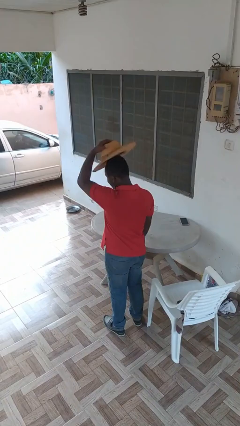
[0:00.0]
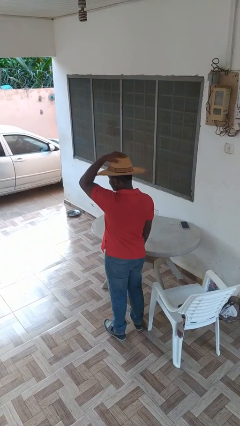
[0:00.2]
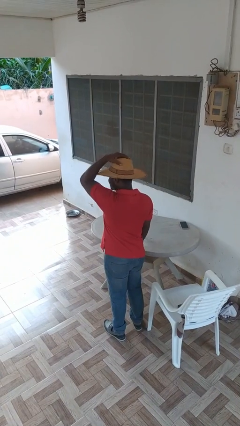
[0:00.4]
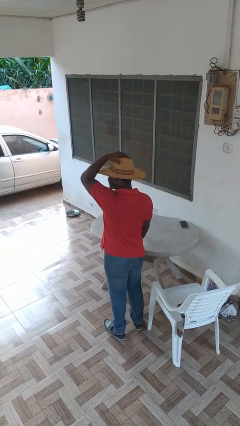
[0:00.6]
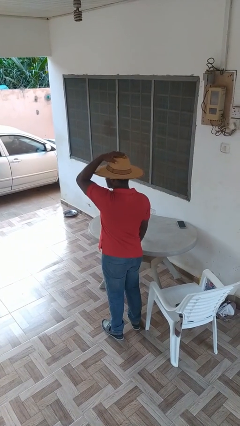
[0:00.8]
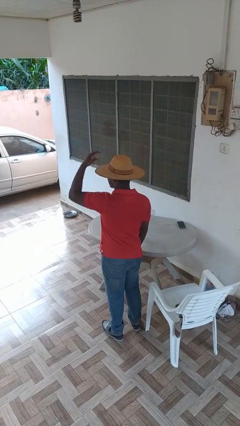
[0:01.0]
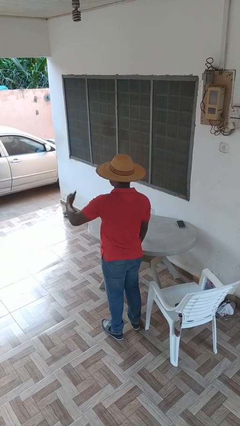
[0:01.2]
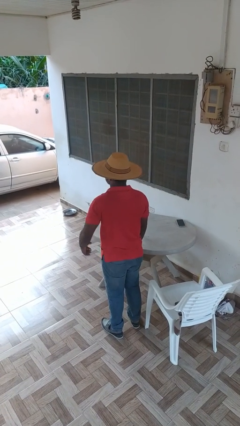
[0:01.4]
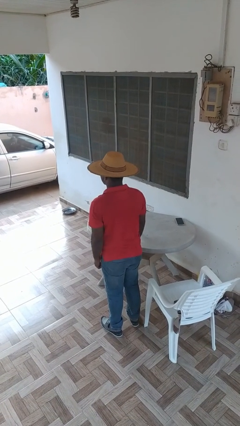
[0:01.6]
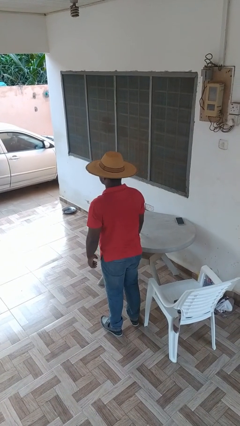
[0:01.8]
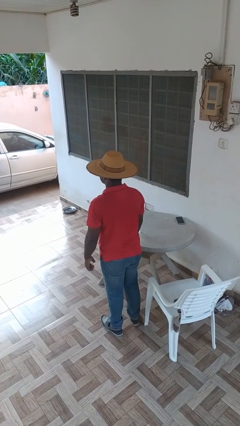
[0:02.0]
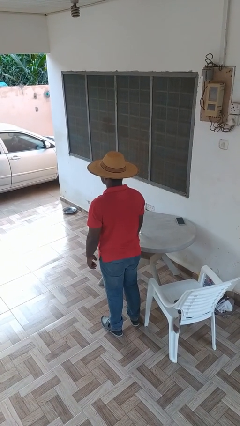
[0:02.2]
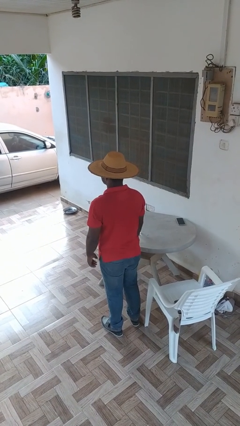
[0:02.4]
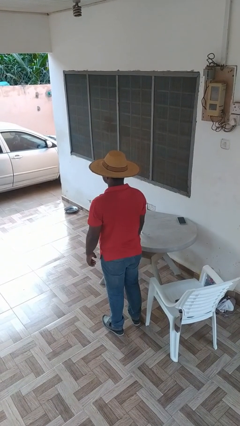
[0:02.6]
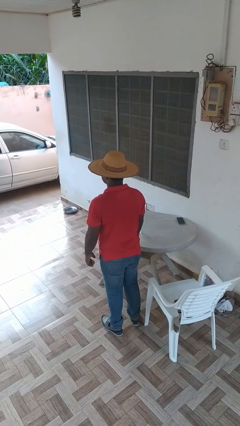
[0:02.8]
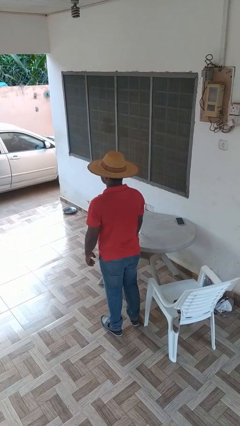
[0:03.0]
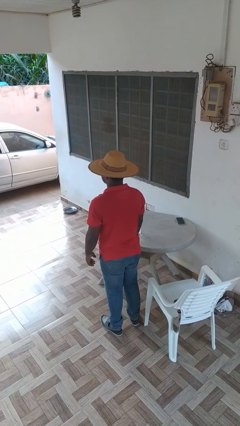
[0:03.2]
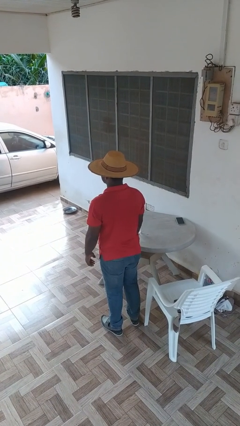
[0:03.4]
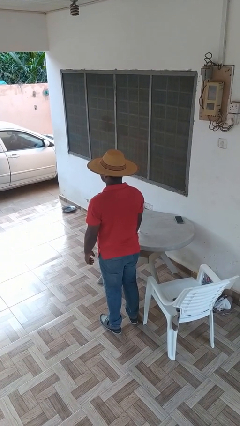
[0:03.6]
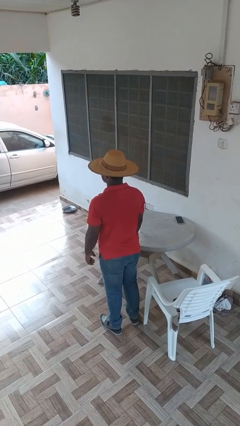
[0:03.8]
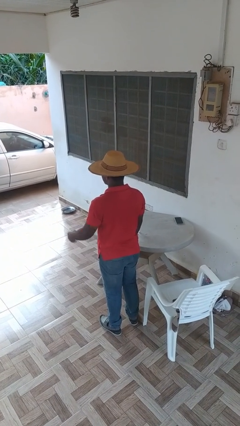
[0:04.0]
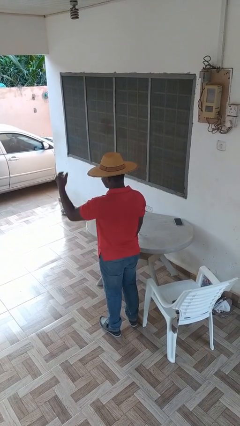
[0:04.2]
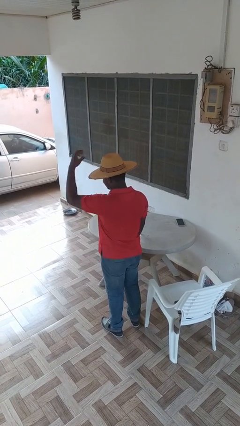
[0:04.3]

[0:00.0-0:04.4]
person puts on hat

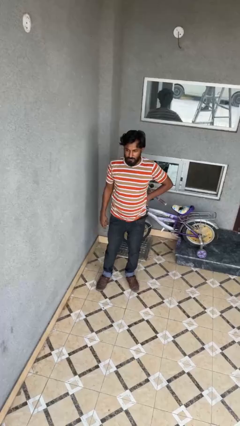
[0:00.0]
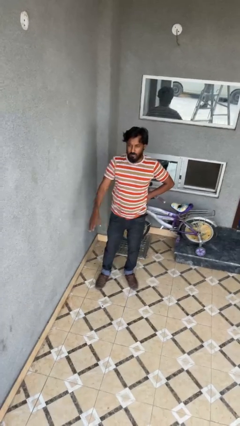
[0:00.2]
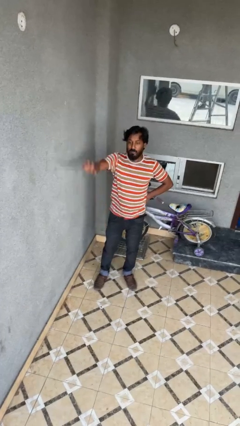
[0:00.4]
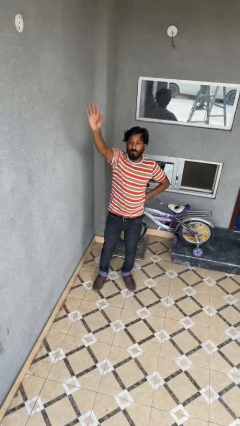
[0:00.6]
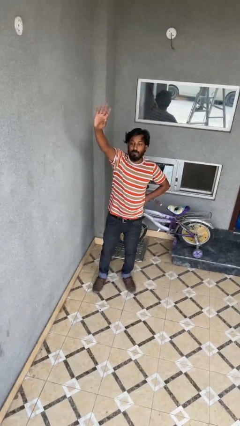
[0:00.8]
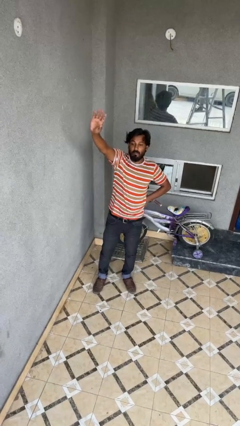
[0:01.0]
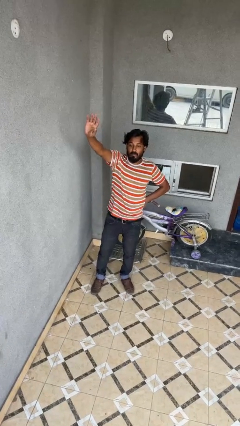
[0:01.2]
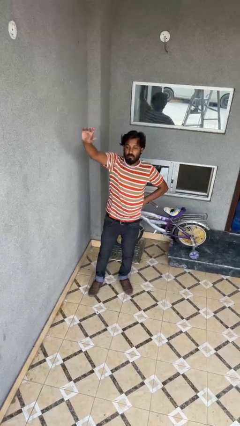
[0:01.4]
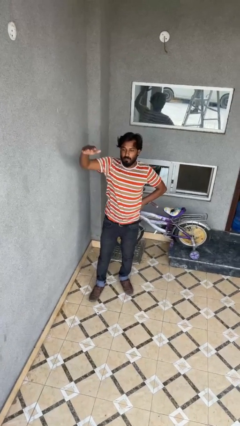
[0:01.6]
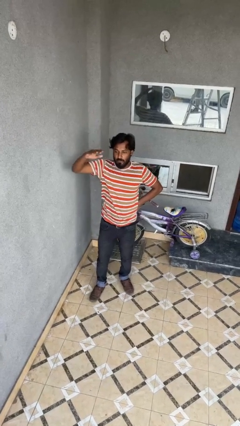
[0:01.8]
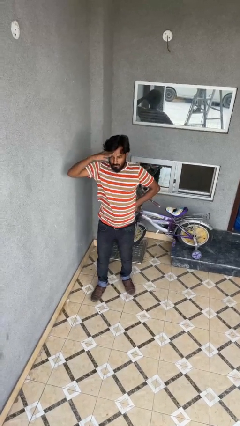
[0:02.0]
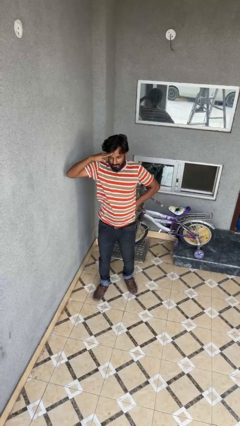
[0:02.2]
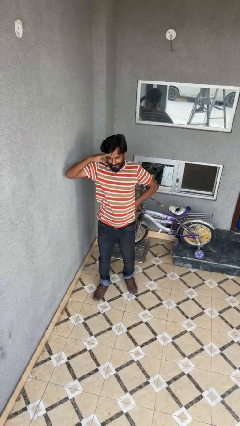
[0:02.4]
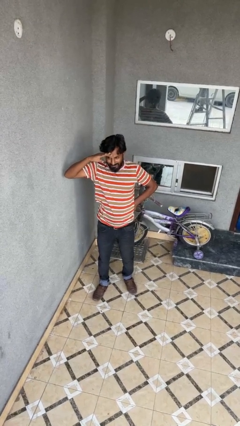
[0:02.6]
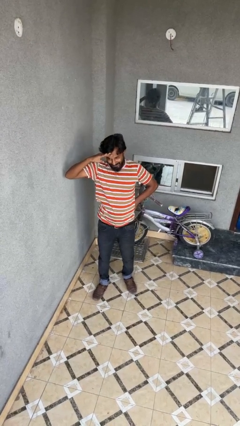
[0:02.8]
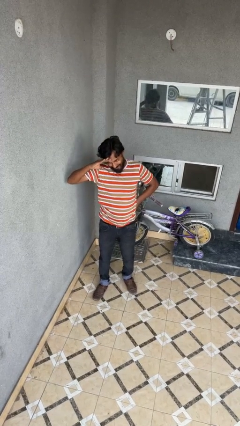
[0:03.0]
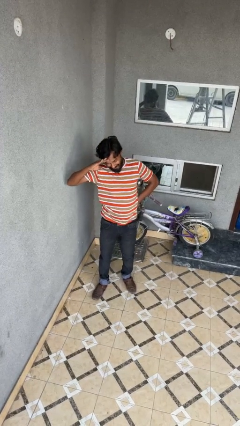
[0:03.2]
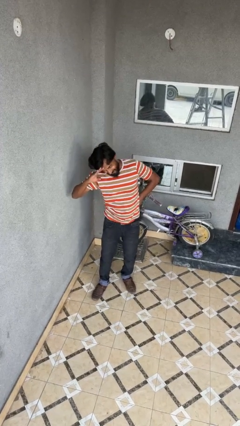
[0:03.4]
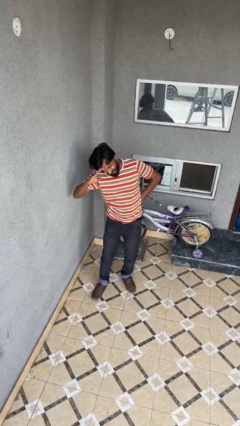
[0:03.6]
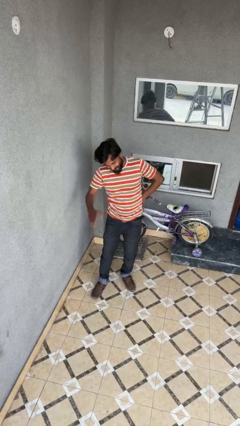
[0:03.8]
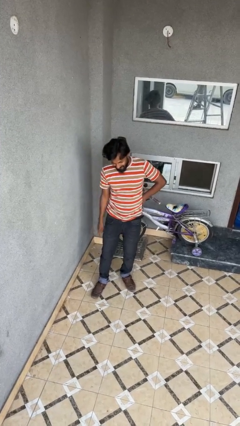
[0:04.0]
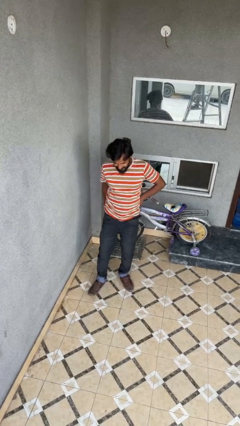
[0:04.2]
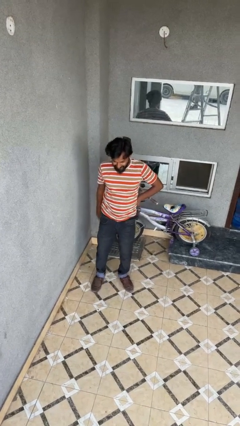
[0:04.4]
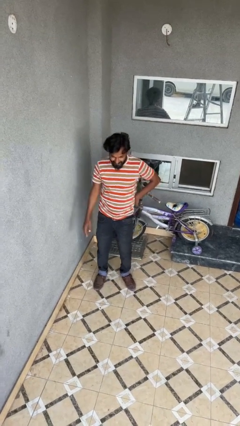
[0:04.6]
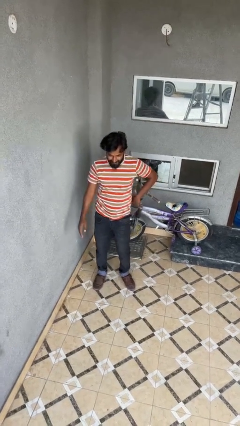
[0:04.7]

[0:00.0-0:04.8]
person waves at person

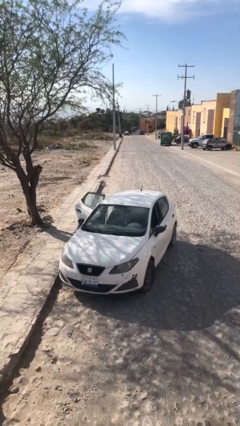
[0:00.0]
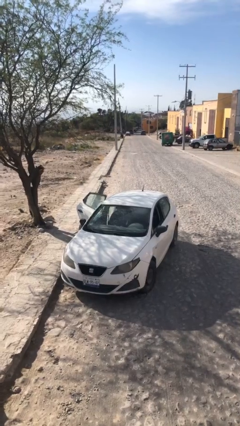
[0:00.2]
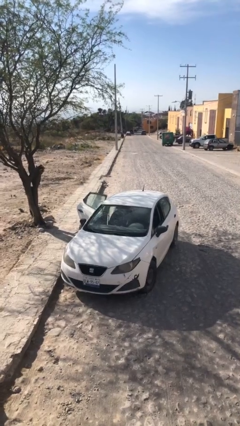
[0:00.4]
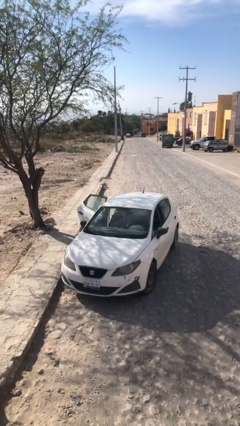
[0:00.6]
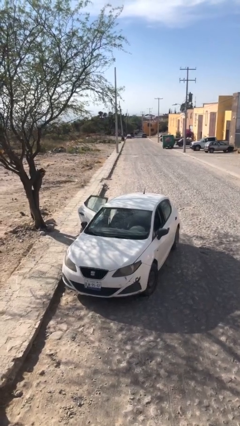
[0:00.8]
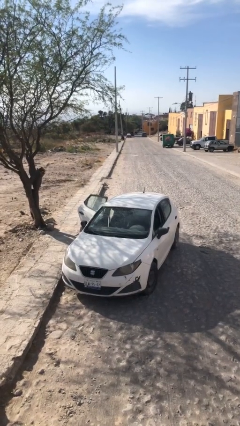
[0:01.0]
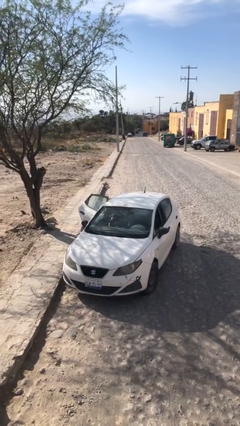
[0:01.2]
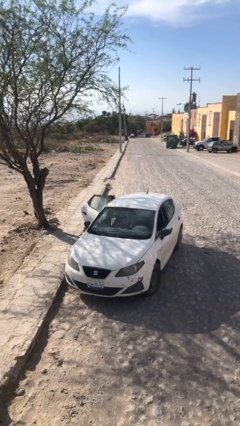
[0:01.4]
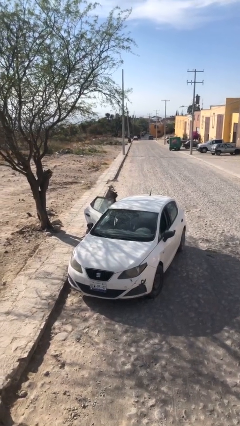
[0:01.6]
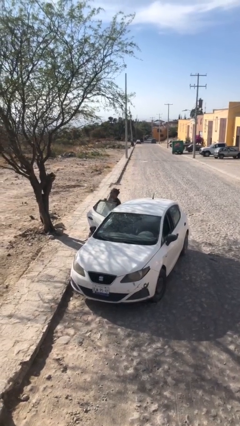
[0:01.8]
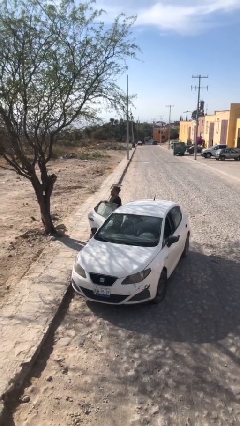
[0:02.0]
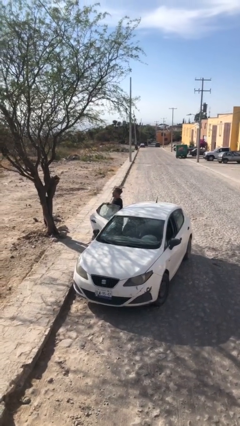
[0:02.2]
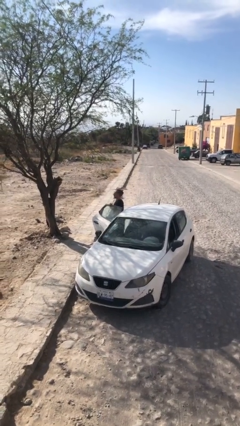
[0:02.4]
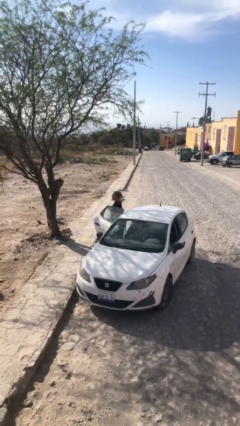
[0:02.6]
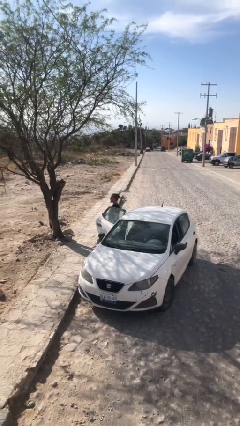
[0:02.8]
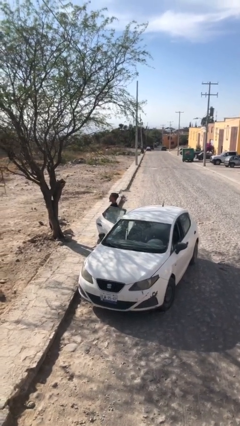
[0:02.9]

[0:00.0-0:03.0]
person exits car

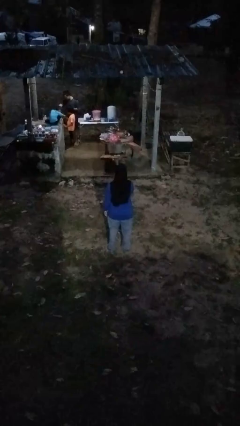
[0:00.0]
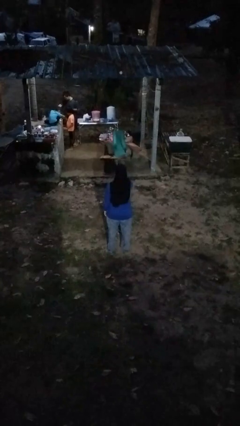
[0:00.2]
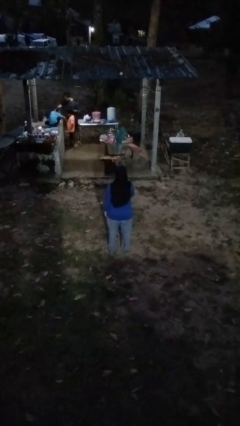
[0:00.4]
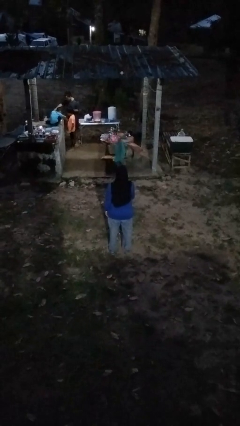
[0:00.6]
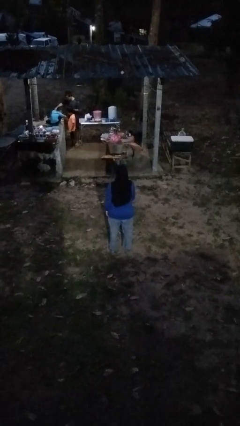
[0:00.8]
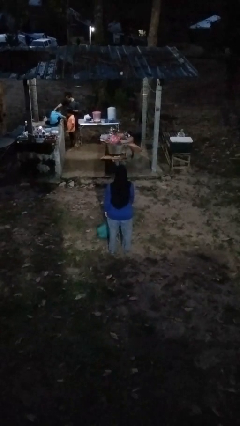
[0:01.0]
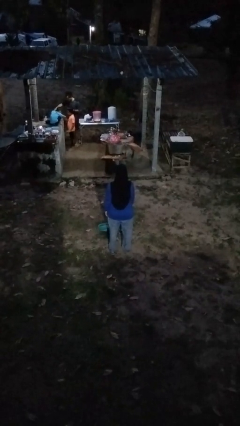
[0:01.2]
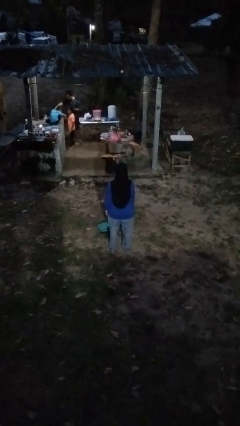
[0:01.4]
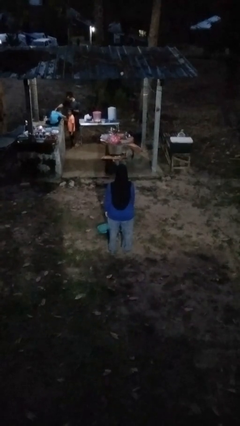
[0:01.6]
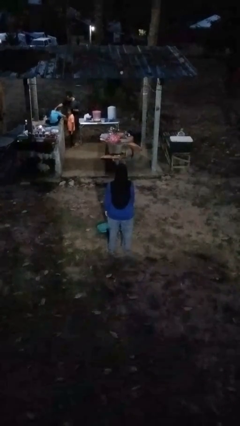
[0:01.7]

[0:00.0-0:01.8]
person throws object into air

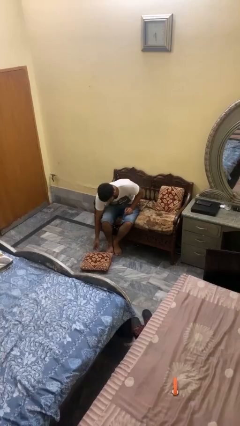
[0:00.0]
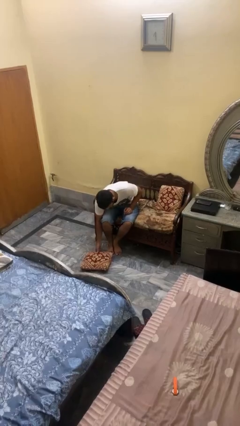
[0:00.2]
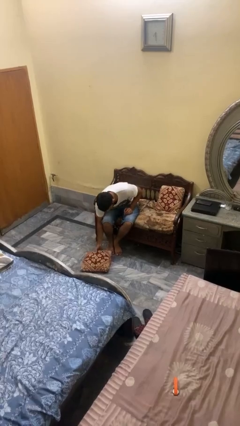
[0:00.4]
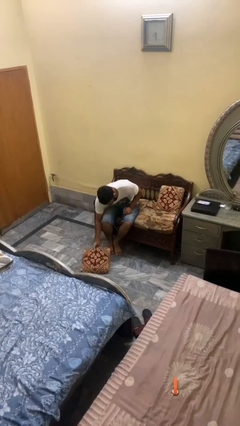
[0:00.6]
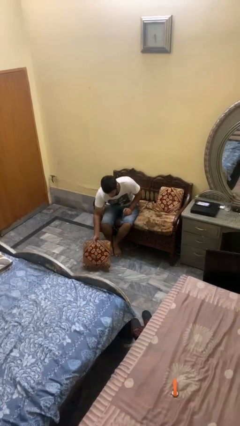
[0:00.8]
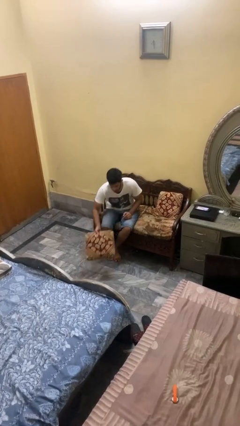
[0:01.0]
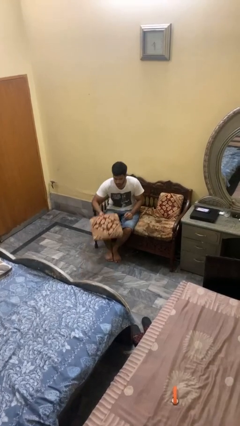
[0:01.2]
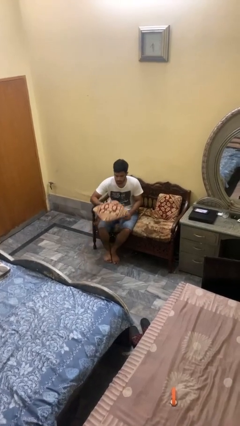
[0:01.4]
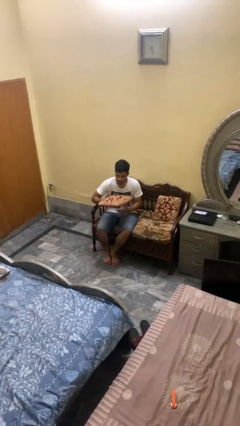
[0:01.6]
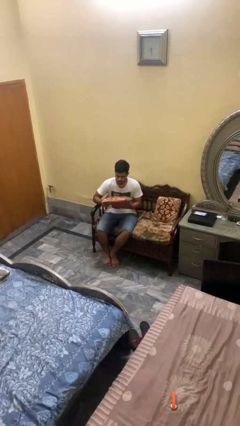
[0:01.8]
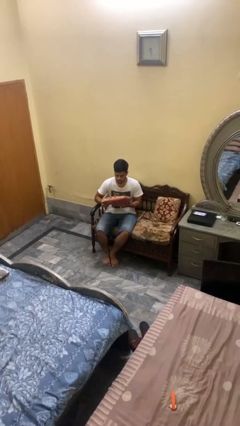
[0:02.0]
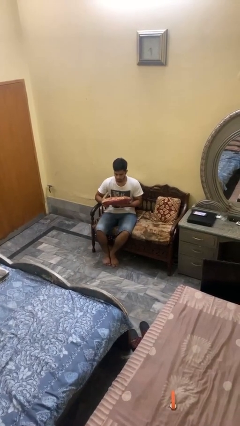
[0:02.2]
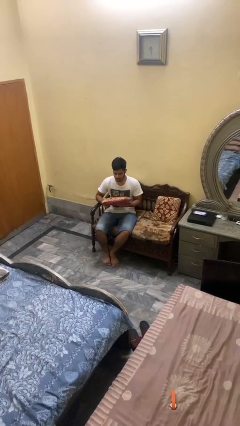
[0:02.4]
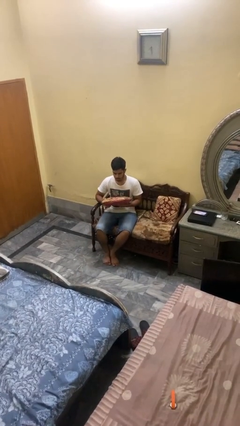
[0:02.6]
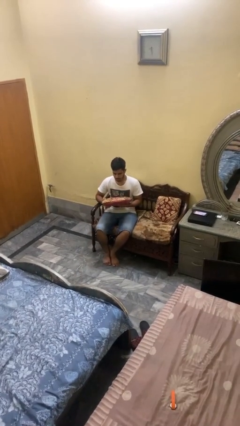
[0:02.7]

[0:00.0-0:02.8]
person picks up object from floor

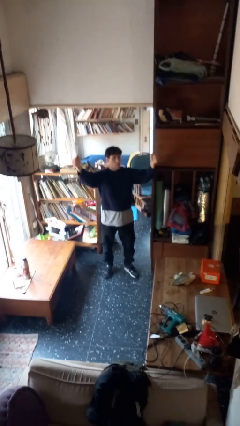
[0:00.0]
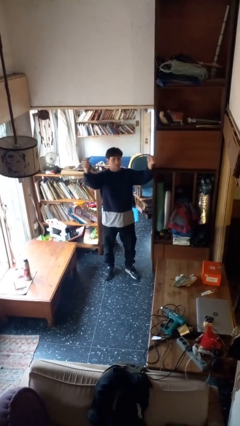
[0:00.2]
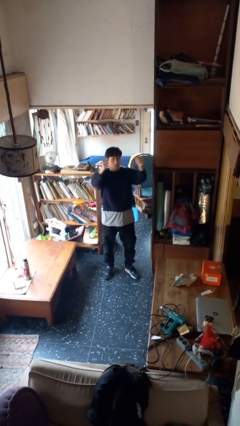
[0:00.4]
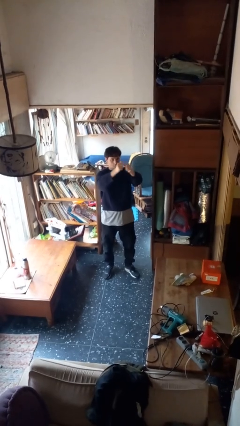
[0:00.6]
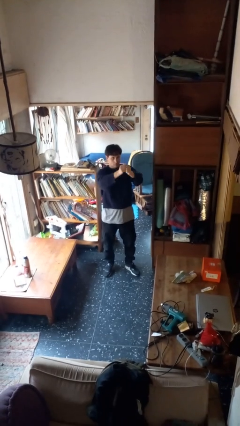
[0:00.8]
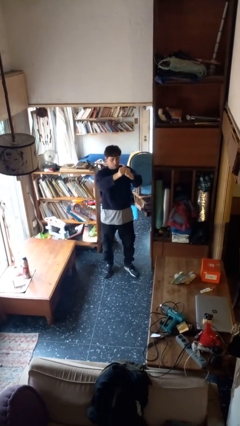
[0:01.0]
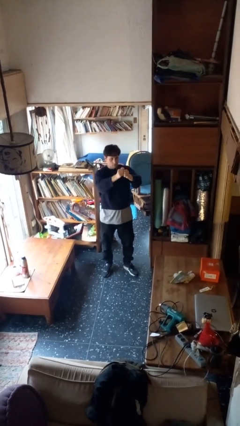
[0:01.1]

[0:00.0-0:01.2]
person gestures zoom out
